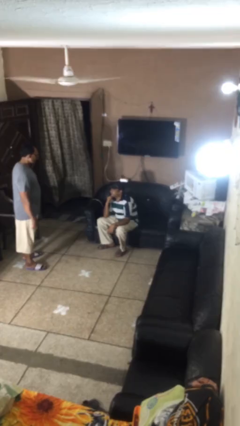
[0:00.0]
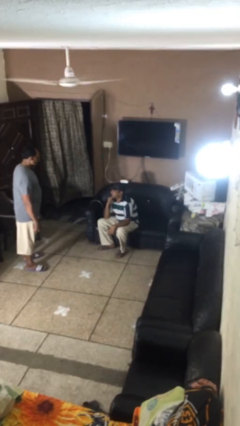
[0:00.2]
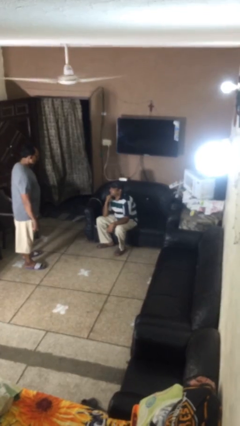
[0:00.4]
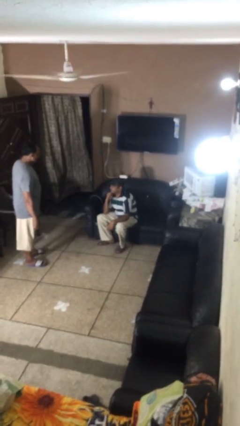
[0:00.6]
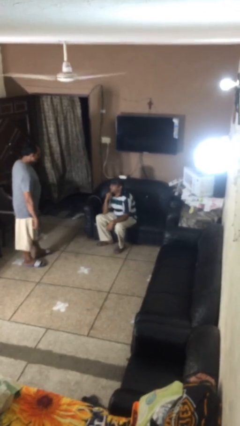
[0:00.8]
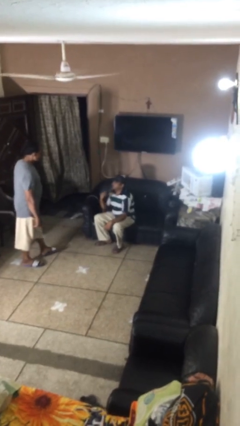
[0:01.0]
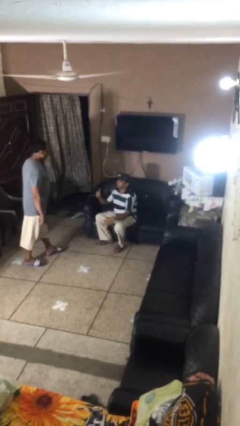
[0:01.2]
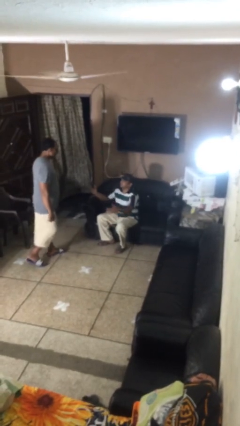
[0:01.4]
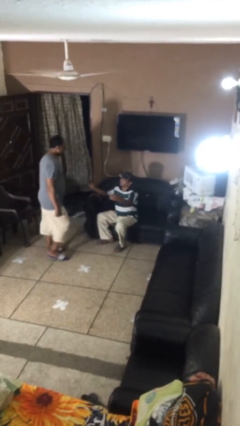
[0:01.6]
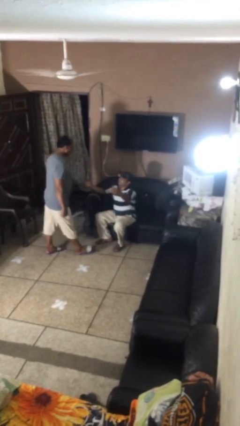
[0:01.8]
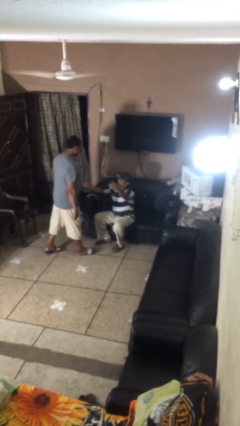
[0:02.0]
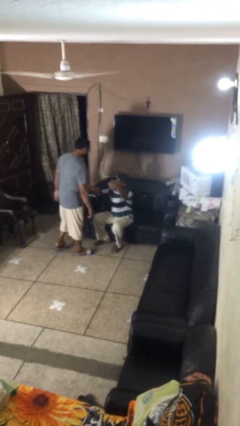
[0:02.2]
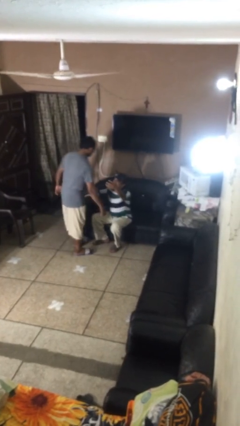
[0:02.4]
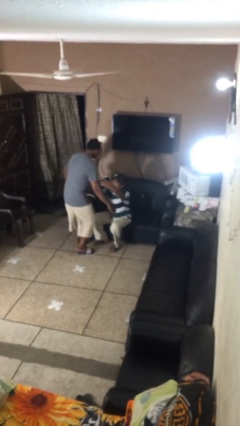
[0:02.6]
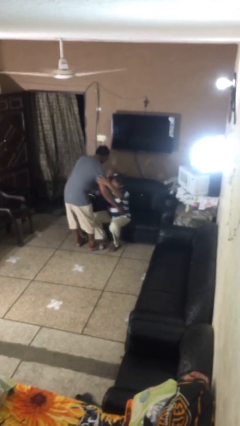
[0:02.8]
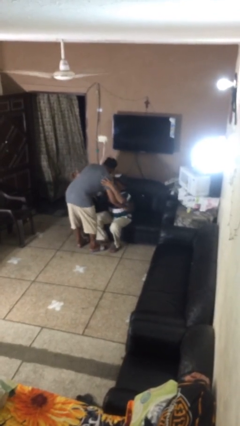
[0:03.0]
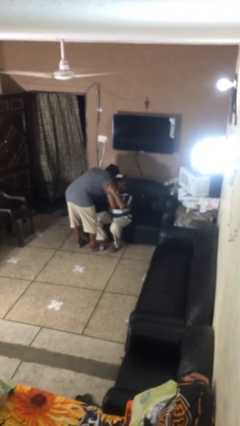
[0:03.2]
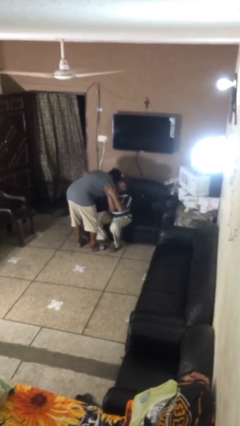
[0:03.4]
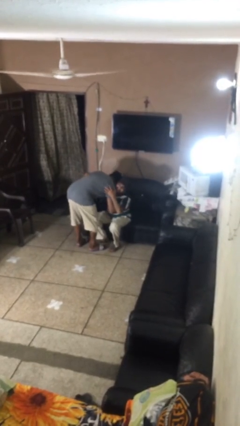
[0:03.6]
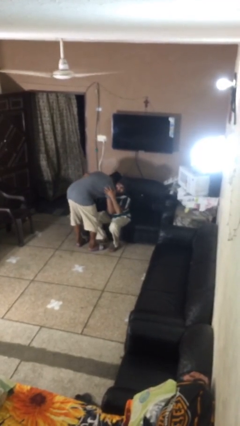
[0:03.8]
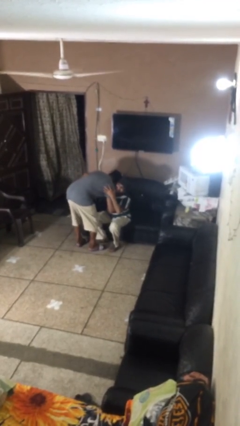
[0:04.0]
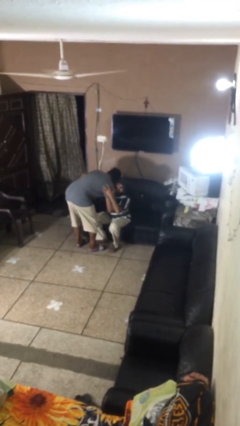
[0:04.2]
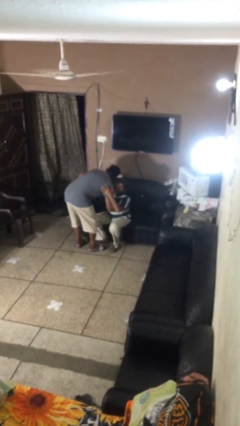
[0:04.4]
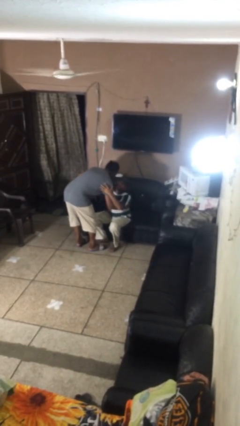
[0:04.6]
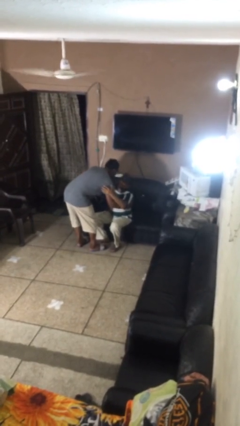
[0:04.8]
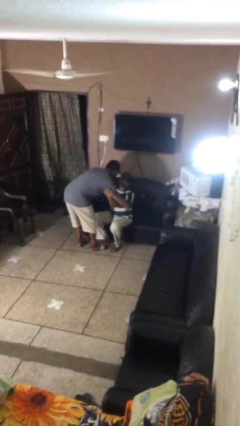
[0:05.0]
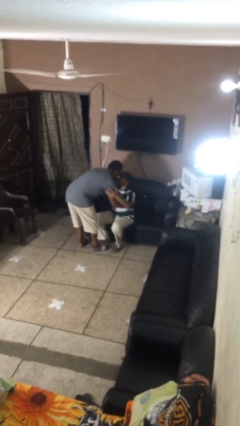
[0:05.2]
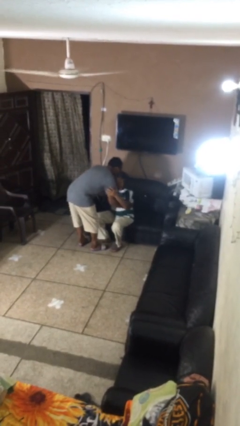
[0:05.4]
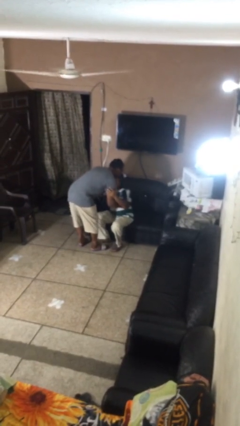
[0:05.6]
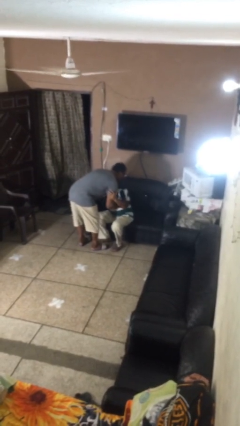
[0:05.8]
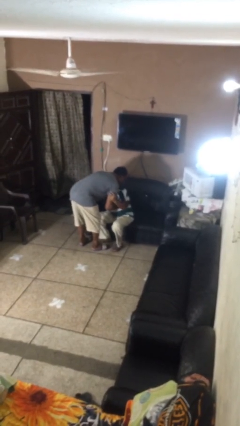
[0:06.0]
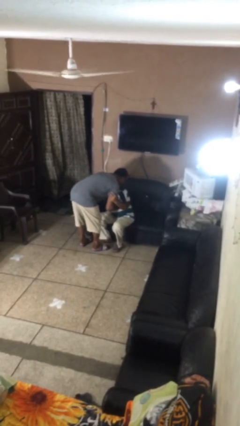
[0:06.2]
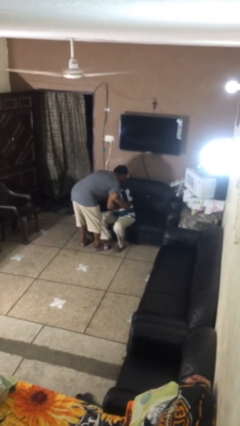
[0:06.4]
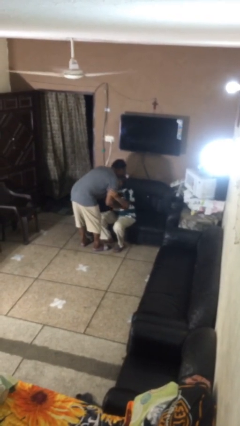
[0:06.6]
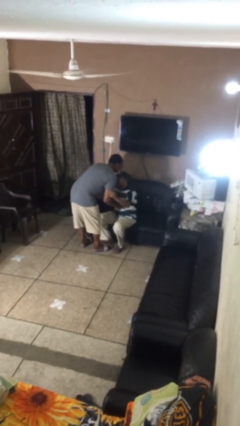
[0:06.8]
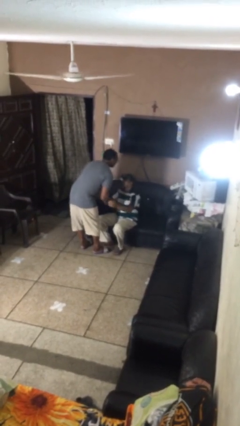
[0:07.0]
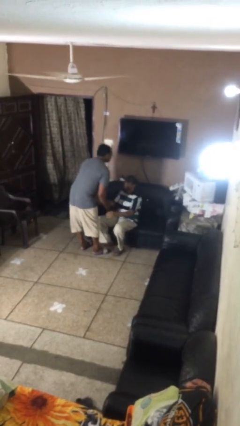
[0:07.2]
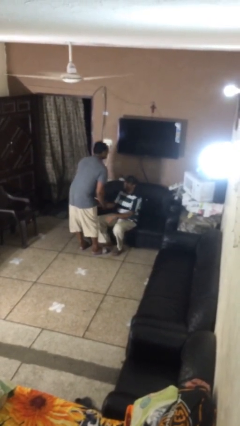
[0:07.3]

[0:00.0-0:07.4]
person embraces person

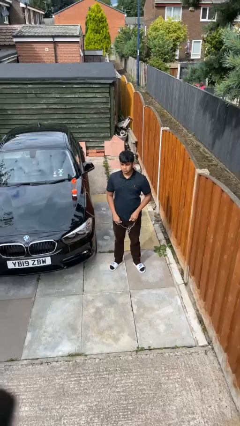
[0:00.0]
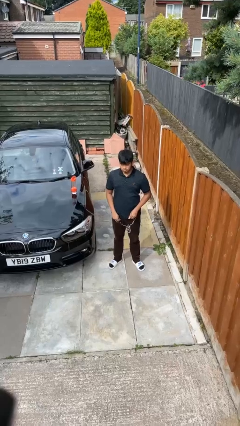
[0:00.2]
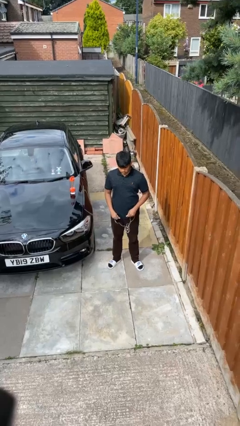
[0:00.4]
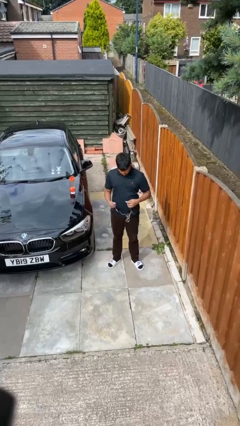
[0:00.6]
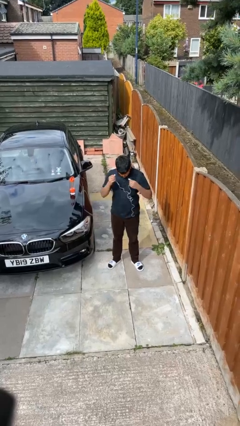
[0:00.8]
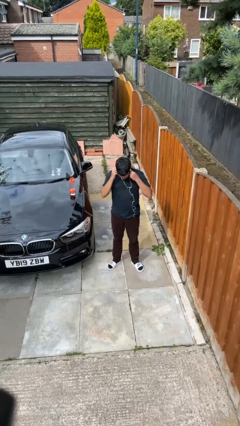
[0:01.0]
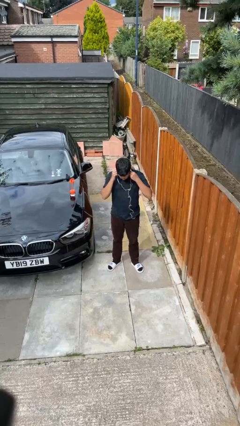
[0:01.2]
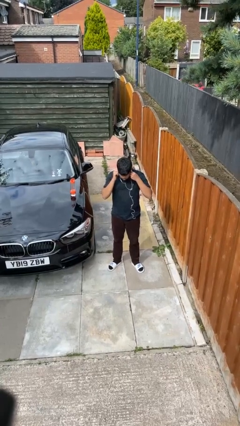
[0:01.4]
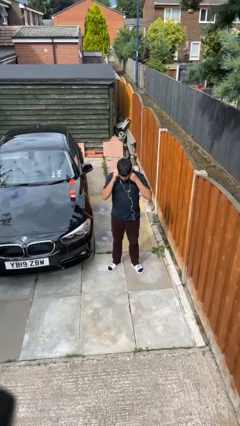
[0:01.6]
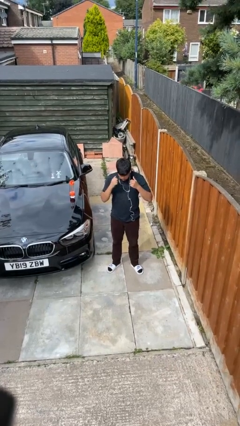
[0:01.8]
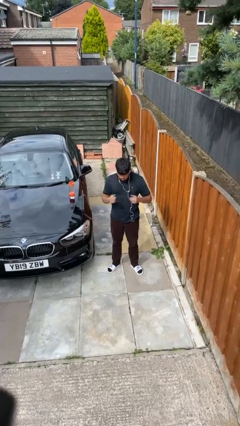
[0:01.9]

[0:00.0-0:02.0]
person puts on headphones

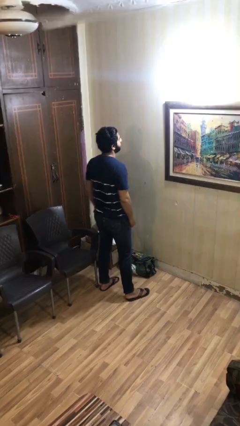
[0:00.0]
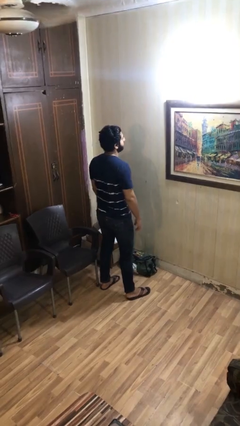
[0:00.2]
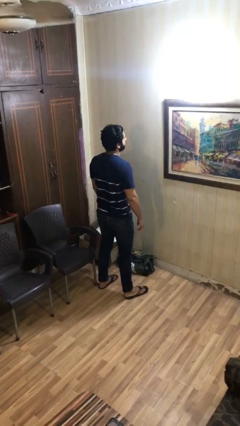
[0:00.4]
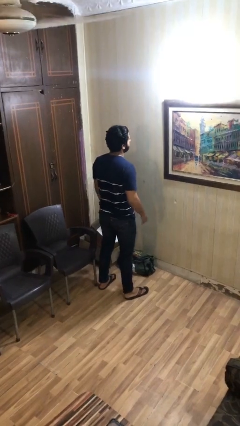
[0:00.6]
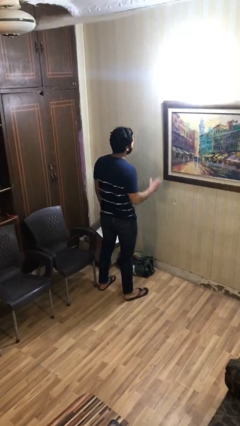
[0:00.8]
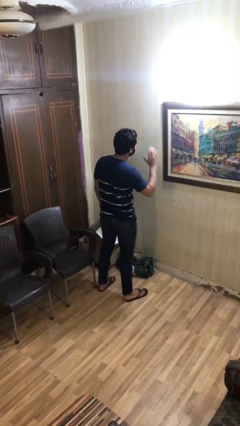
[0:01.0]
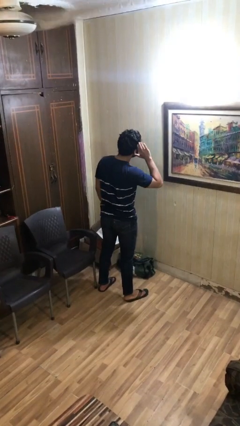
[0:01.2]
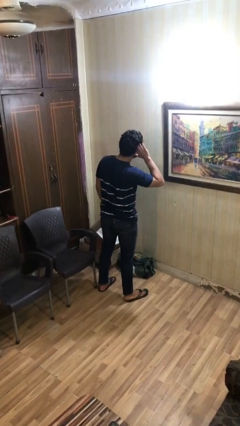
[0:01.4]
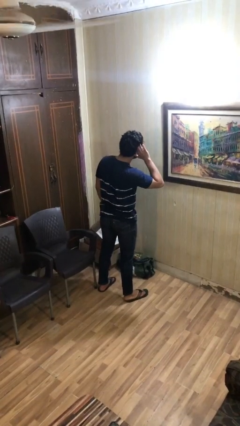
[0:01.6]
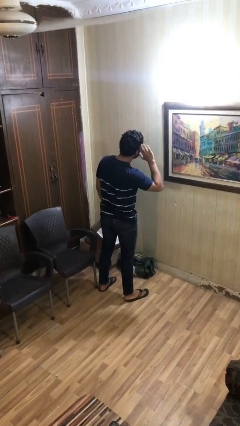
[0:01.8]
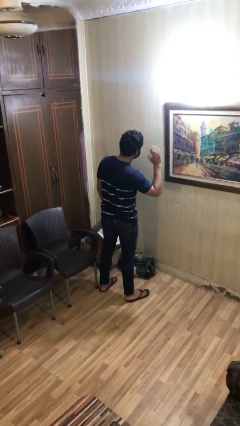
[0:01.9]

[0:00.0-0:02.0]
person gestures listen closely

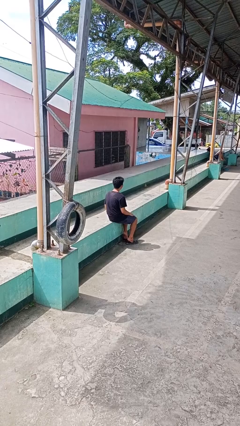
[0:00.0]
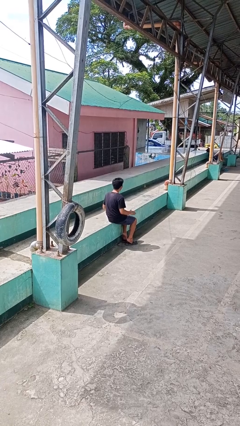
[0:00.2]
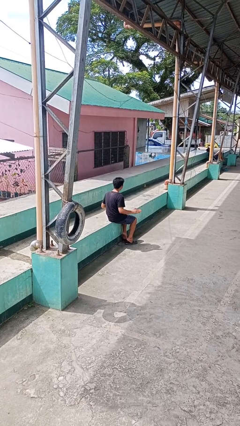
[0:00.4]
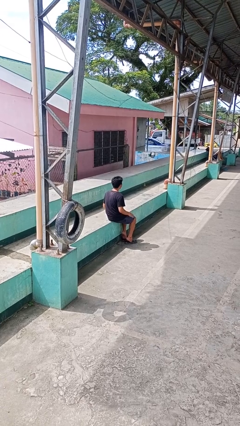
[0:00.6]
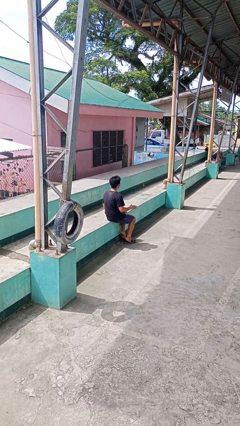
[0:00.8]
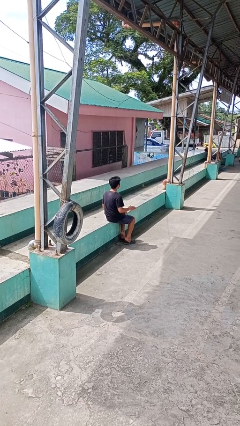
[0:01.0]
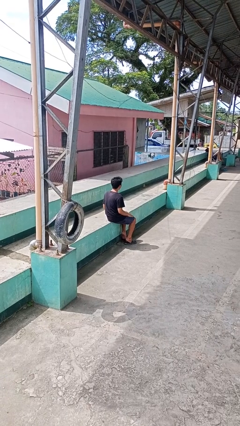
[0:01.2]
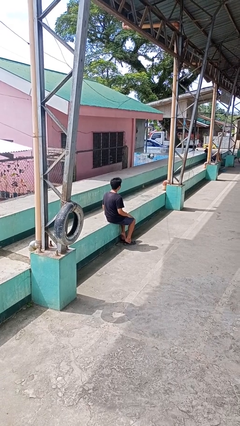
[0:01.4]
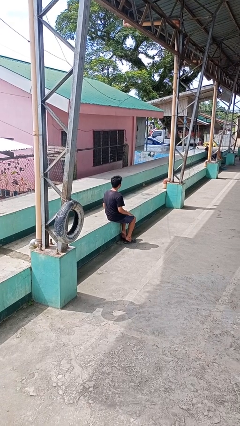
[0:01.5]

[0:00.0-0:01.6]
person slaps hands on thighs

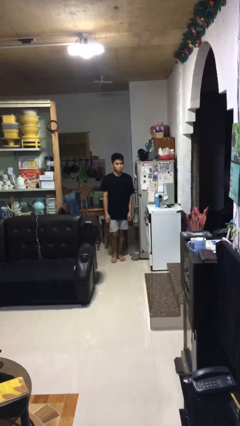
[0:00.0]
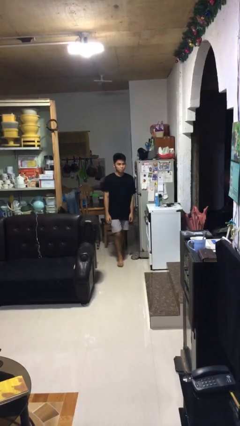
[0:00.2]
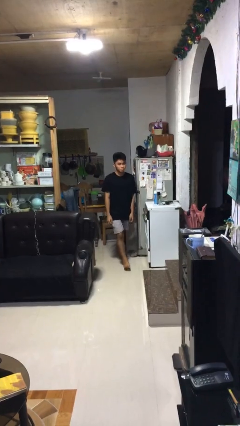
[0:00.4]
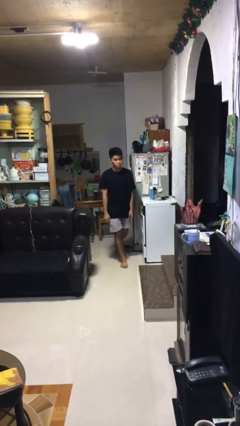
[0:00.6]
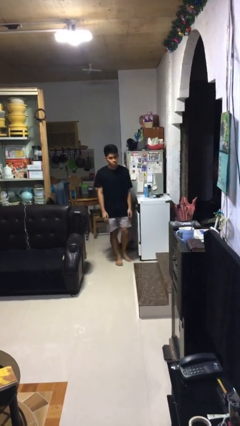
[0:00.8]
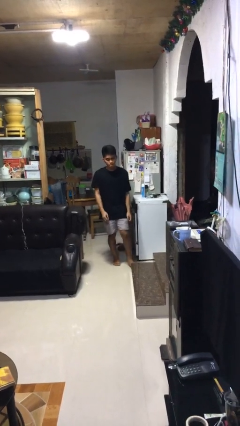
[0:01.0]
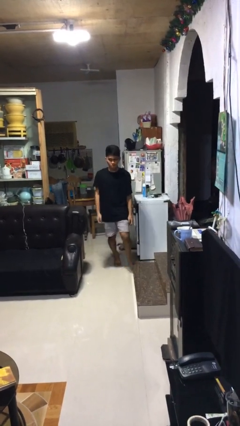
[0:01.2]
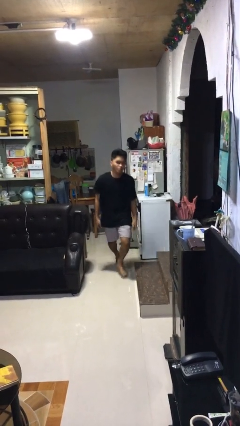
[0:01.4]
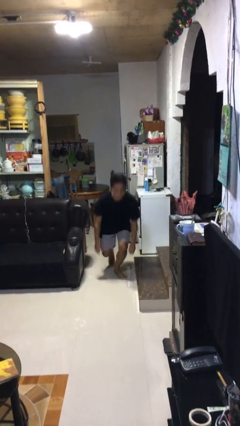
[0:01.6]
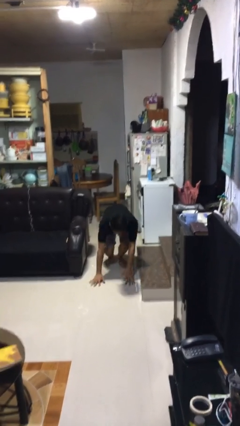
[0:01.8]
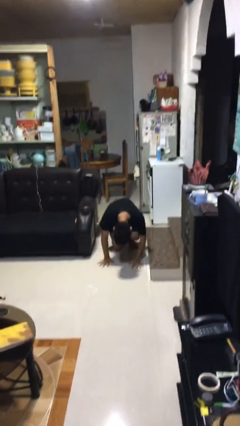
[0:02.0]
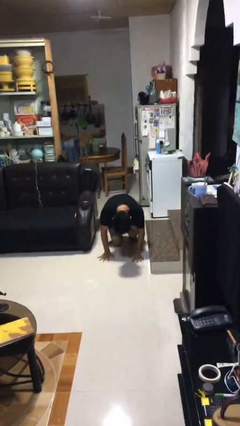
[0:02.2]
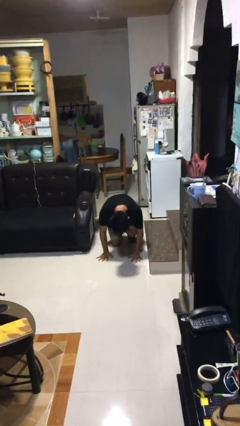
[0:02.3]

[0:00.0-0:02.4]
person trips on object on floor

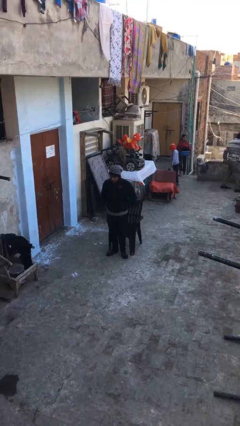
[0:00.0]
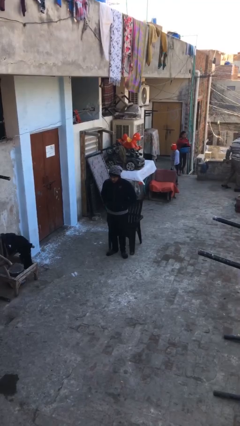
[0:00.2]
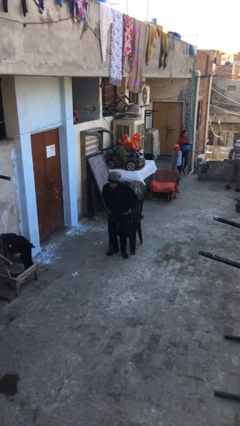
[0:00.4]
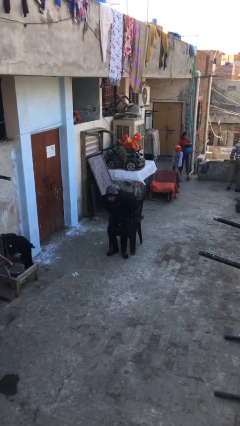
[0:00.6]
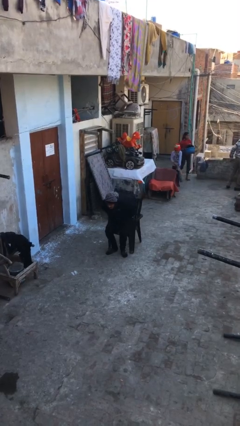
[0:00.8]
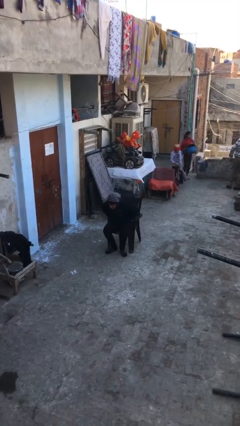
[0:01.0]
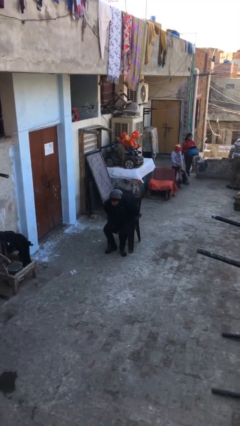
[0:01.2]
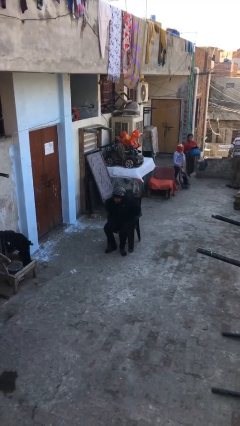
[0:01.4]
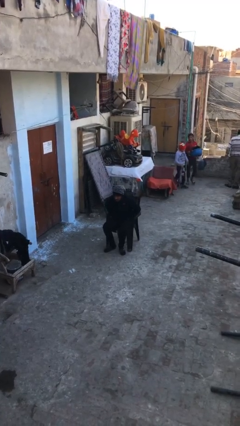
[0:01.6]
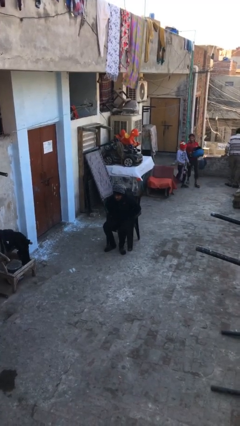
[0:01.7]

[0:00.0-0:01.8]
person sits down
